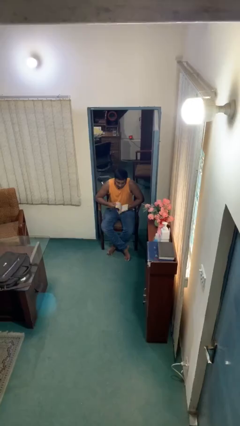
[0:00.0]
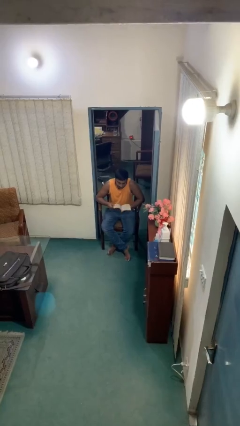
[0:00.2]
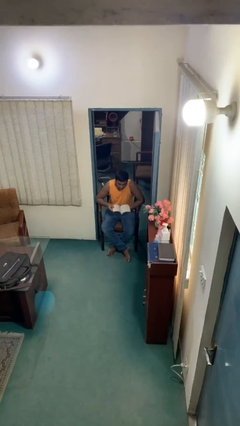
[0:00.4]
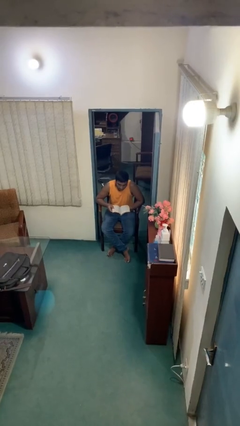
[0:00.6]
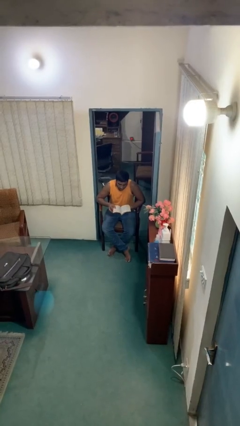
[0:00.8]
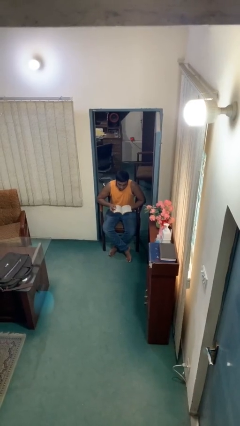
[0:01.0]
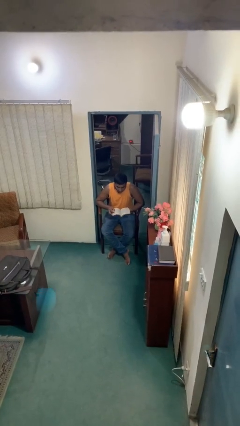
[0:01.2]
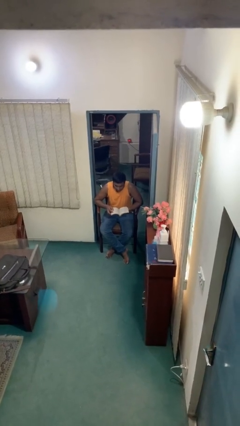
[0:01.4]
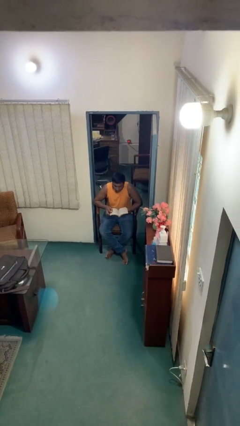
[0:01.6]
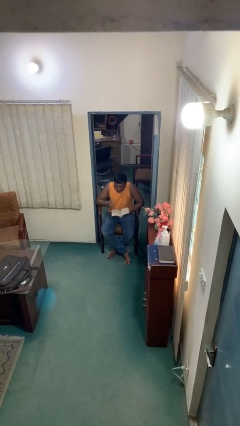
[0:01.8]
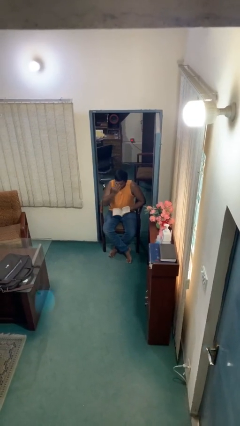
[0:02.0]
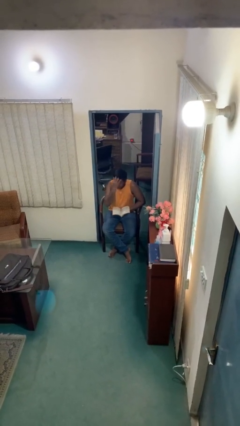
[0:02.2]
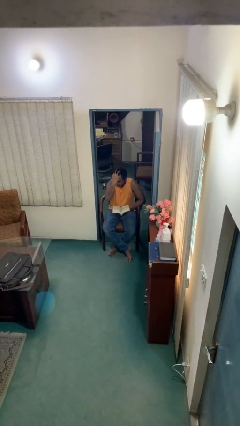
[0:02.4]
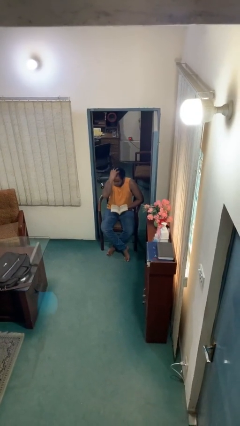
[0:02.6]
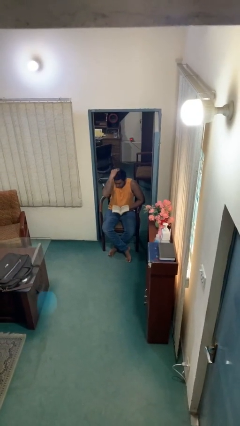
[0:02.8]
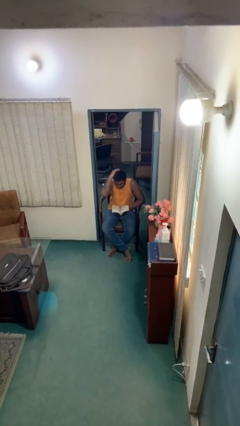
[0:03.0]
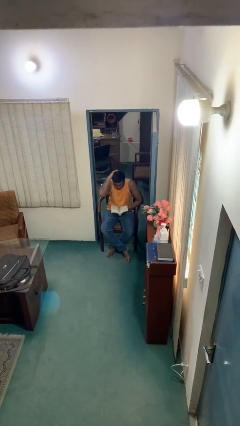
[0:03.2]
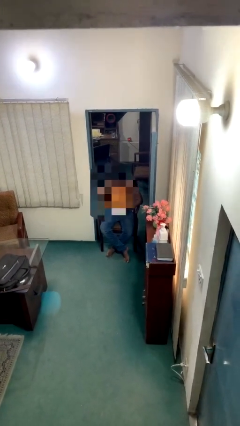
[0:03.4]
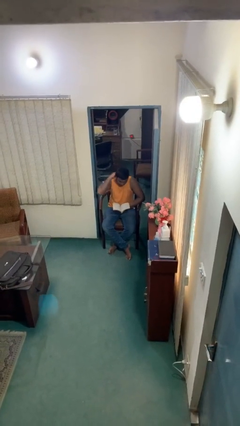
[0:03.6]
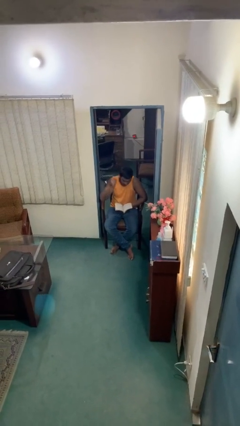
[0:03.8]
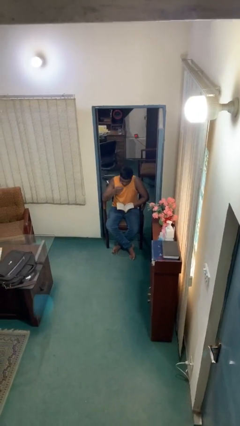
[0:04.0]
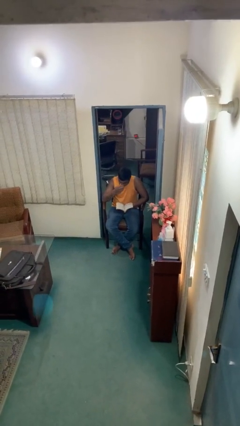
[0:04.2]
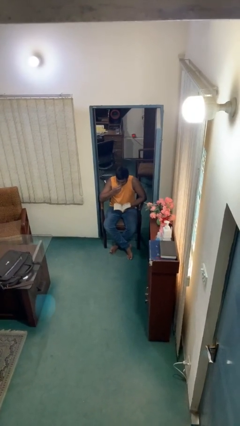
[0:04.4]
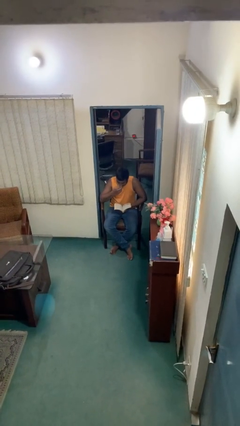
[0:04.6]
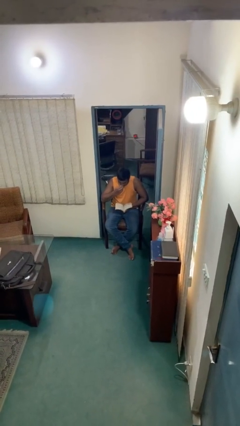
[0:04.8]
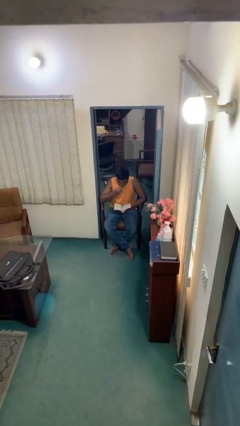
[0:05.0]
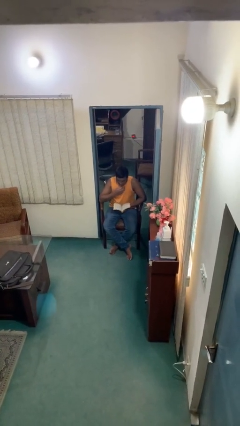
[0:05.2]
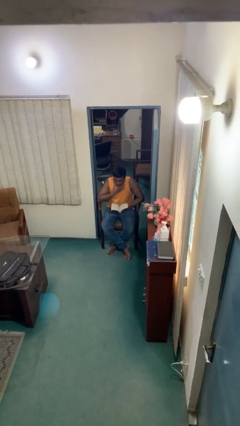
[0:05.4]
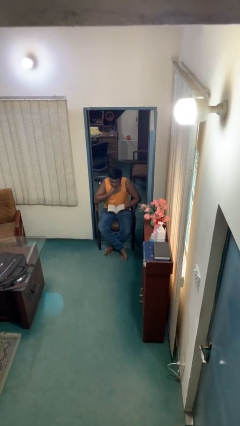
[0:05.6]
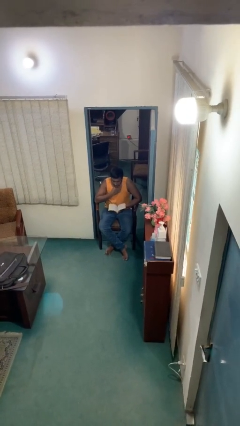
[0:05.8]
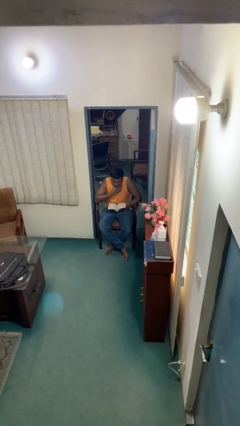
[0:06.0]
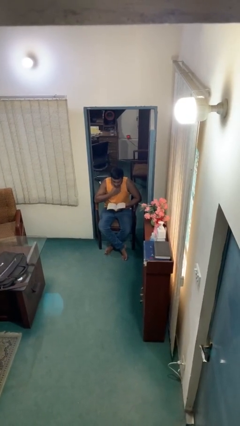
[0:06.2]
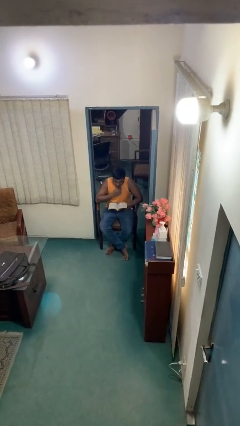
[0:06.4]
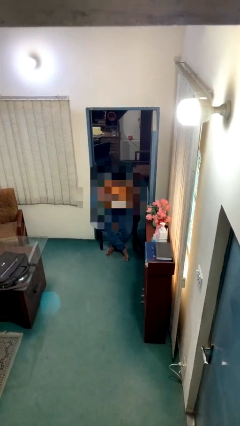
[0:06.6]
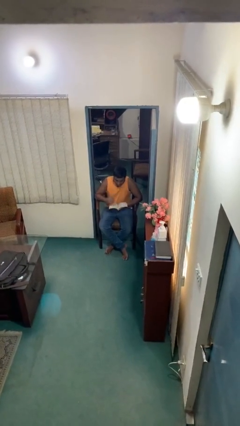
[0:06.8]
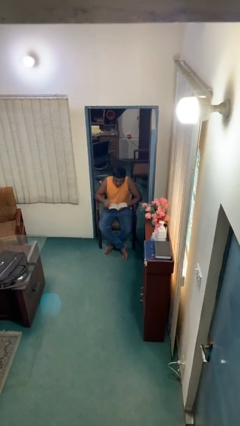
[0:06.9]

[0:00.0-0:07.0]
person reads document

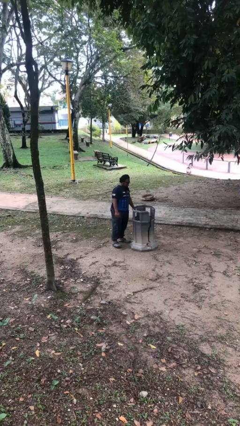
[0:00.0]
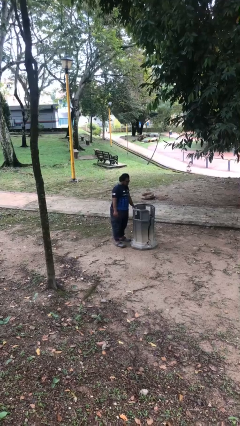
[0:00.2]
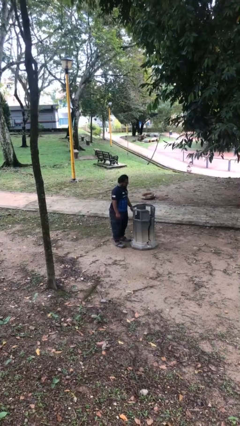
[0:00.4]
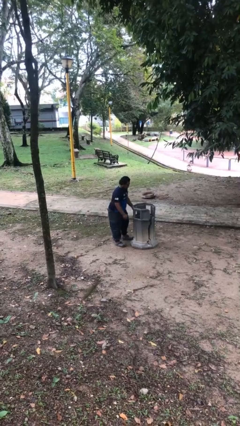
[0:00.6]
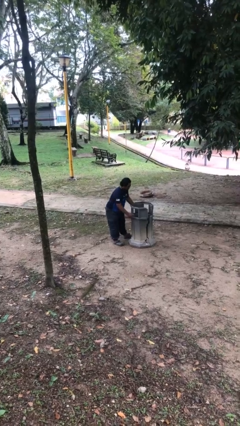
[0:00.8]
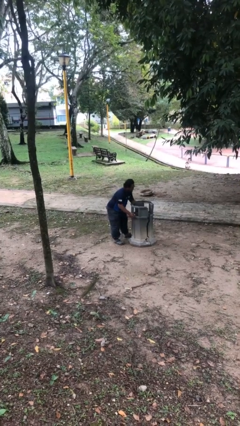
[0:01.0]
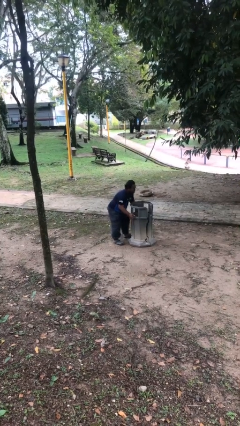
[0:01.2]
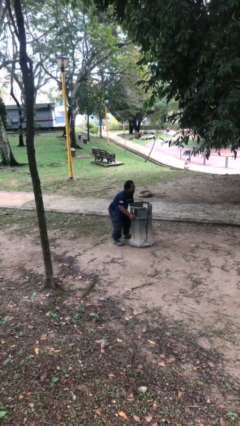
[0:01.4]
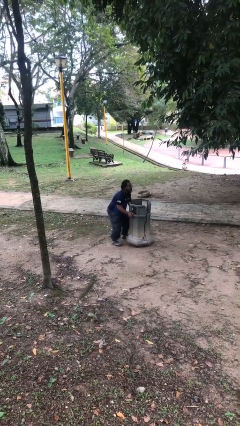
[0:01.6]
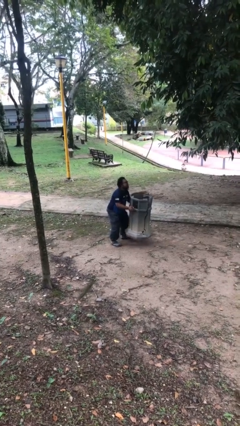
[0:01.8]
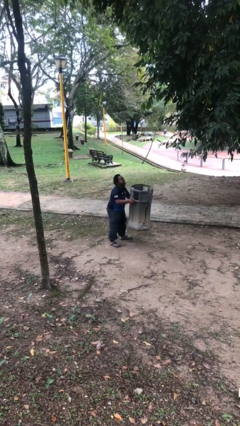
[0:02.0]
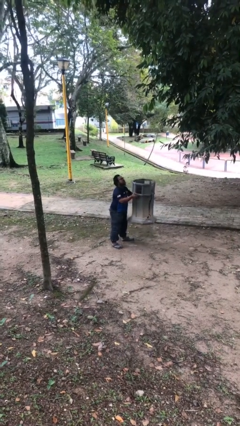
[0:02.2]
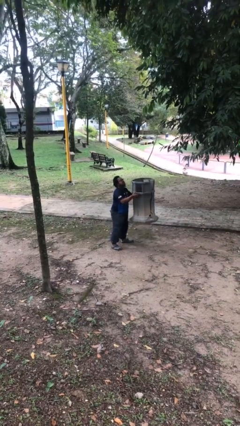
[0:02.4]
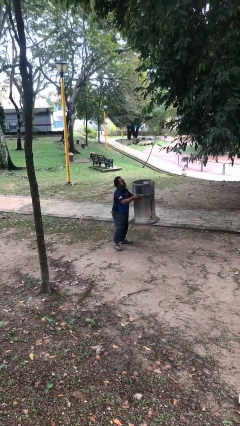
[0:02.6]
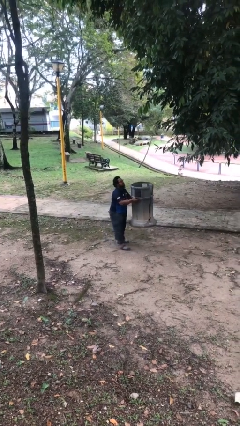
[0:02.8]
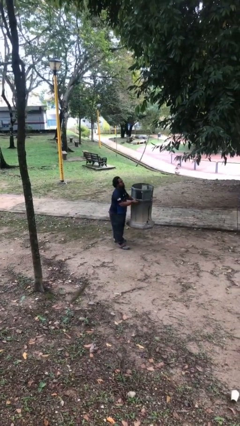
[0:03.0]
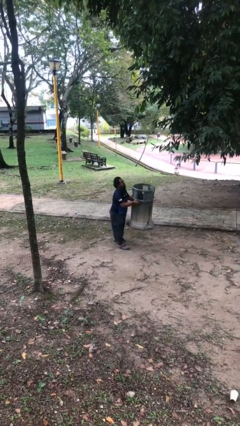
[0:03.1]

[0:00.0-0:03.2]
person picks up object from floor

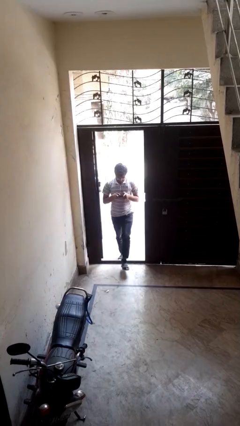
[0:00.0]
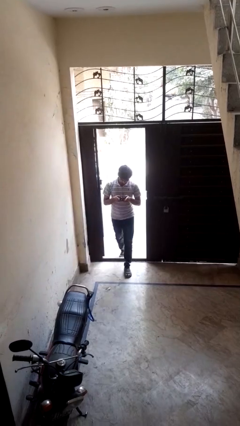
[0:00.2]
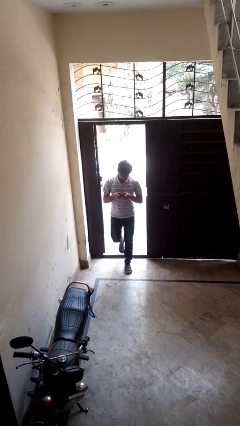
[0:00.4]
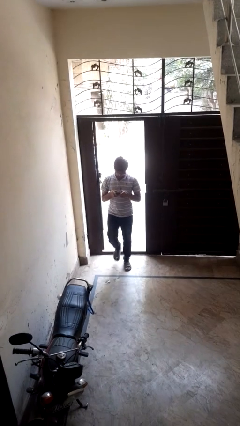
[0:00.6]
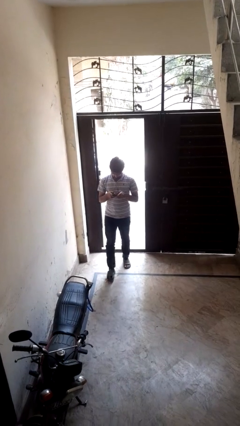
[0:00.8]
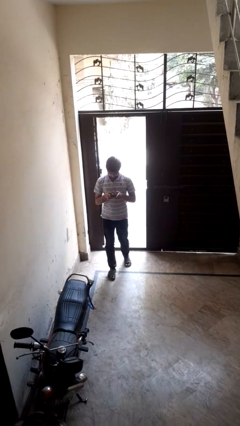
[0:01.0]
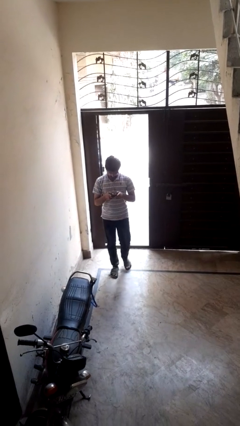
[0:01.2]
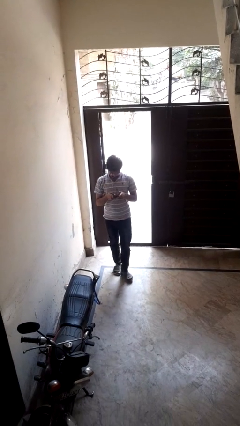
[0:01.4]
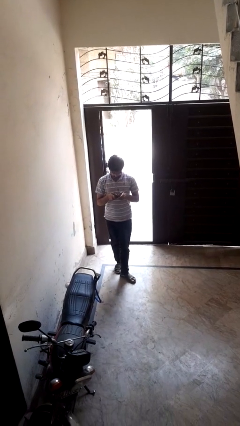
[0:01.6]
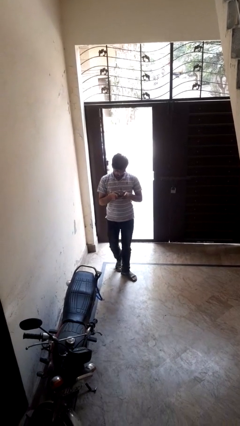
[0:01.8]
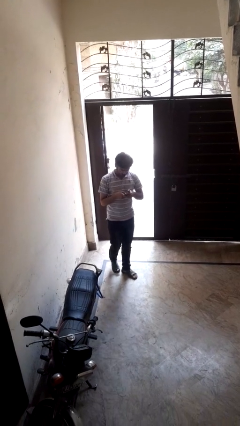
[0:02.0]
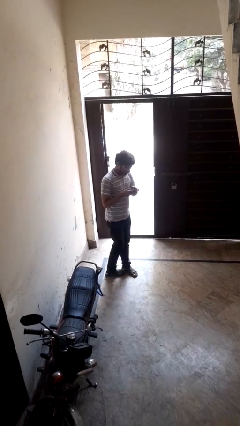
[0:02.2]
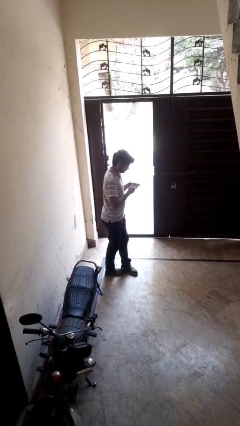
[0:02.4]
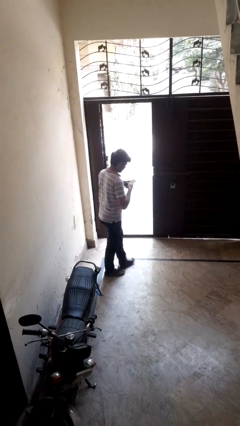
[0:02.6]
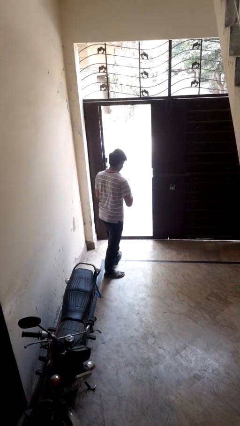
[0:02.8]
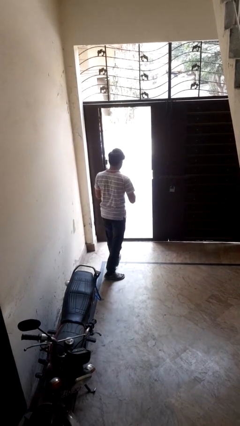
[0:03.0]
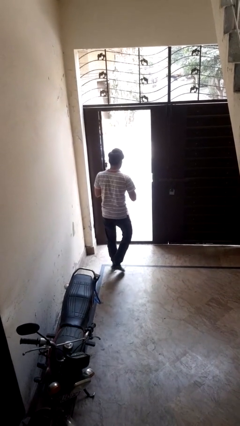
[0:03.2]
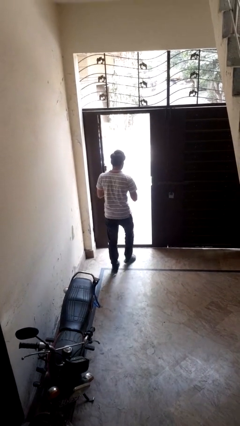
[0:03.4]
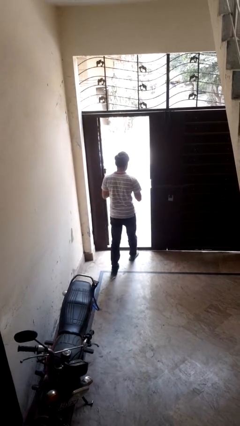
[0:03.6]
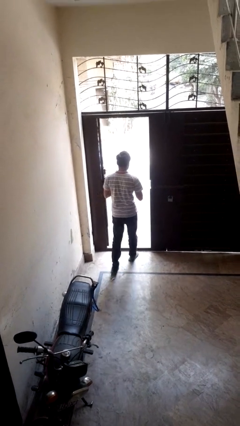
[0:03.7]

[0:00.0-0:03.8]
person enters scene through structure

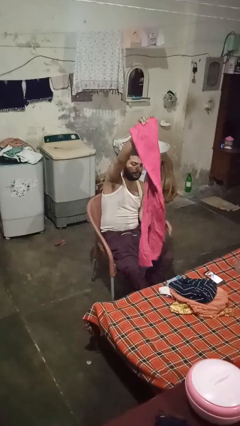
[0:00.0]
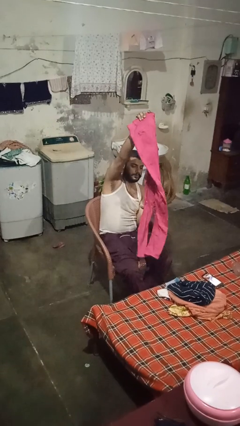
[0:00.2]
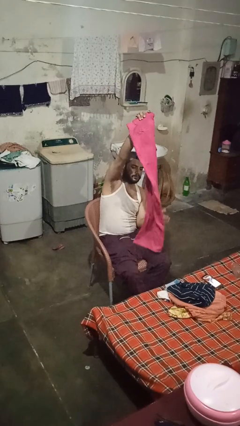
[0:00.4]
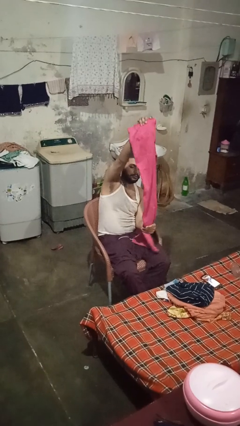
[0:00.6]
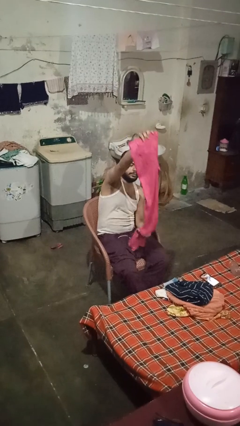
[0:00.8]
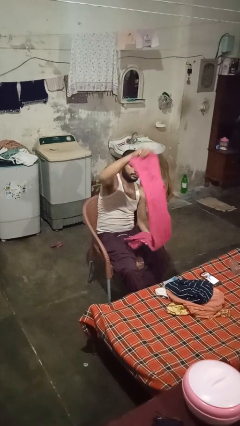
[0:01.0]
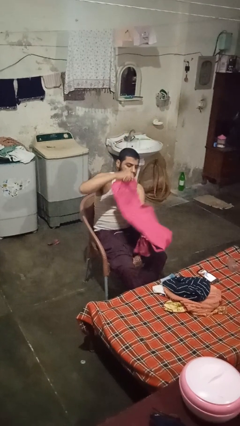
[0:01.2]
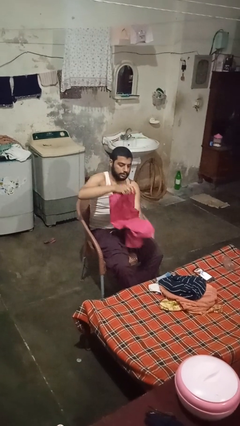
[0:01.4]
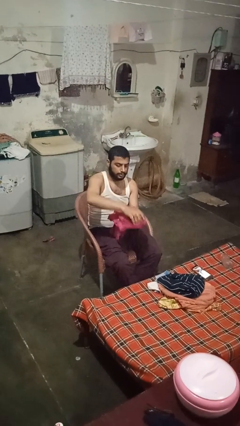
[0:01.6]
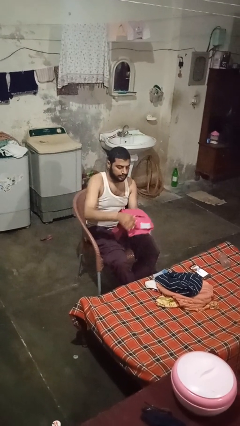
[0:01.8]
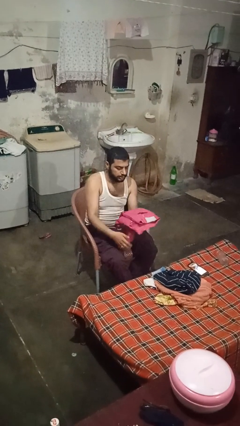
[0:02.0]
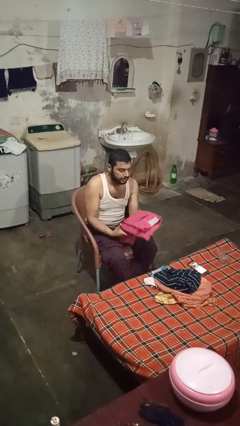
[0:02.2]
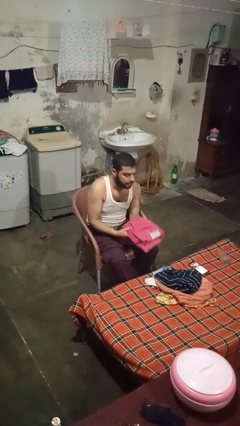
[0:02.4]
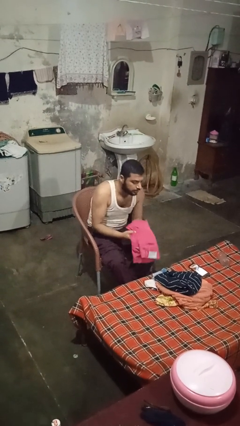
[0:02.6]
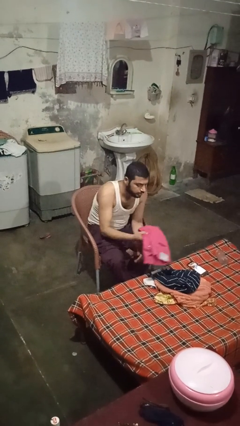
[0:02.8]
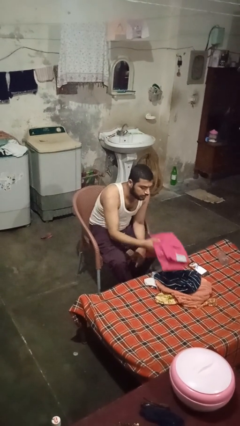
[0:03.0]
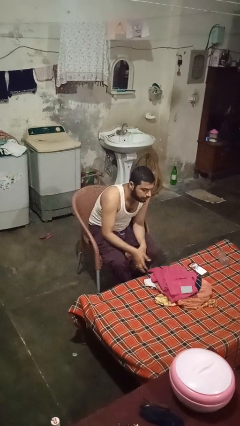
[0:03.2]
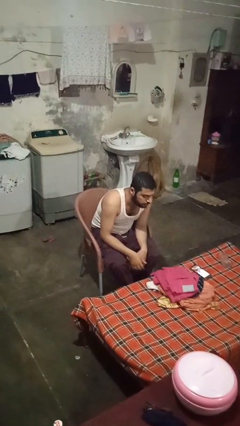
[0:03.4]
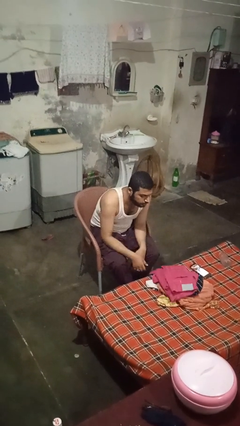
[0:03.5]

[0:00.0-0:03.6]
person folds pants
